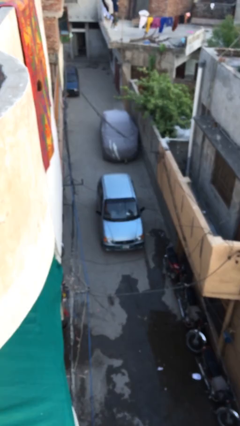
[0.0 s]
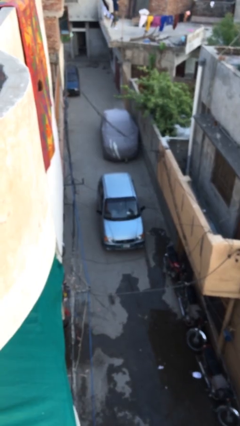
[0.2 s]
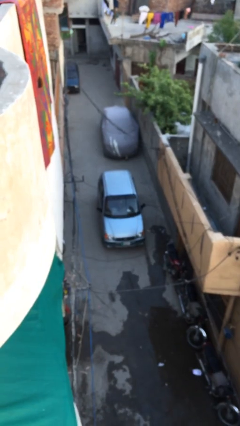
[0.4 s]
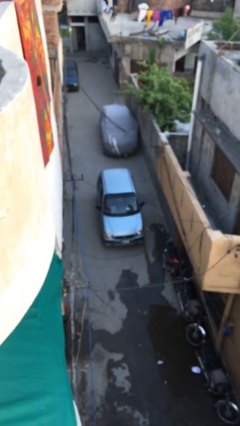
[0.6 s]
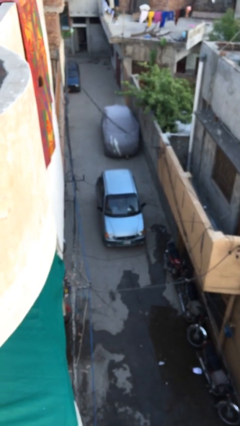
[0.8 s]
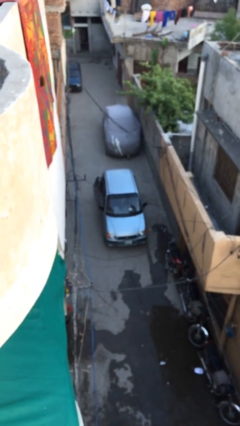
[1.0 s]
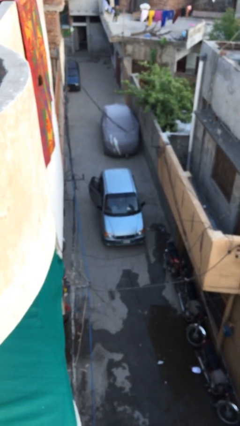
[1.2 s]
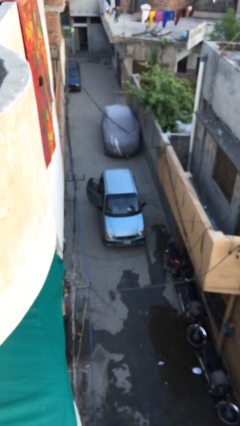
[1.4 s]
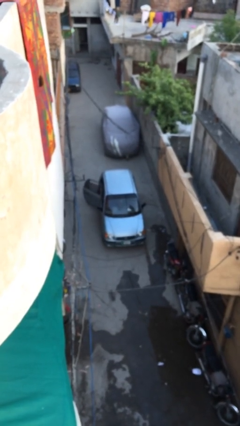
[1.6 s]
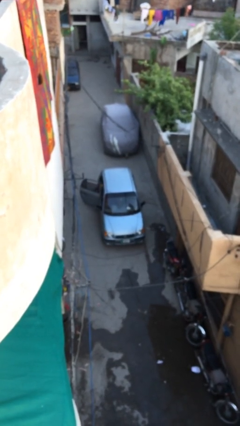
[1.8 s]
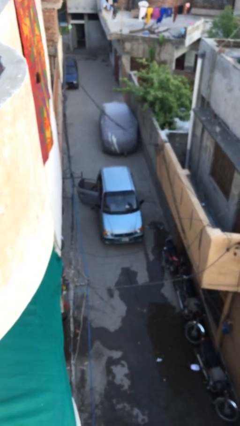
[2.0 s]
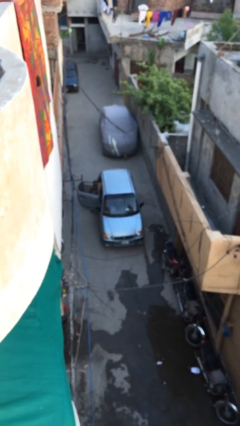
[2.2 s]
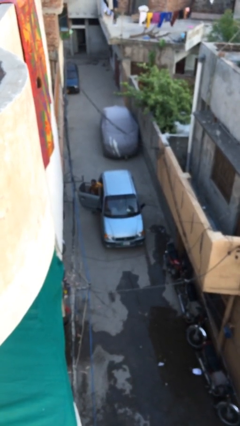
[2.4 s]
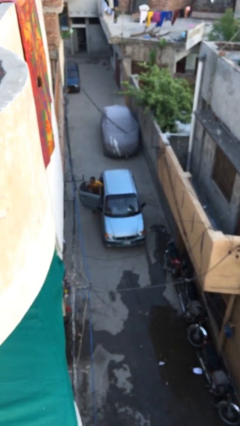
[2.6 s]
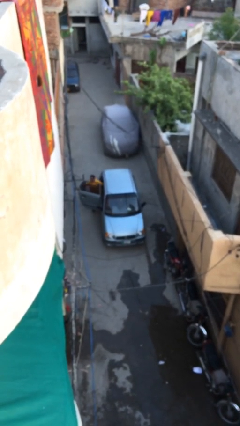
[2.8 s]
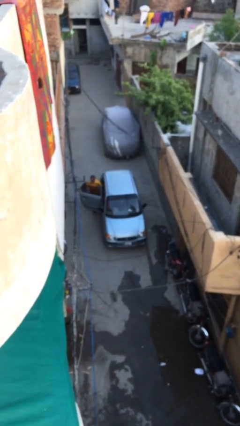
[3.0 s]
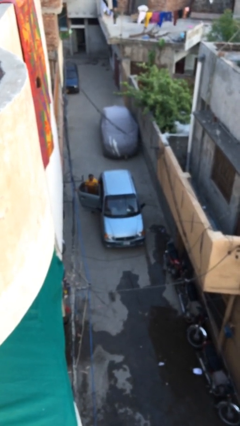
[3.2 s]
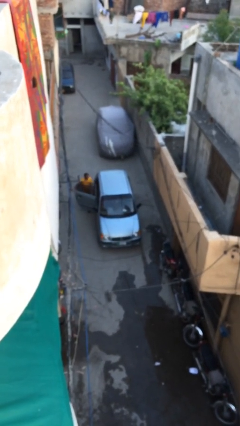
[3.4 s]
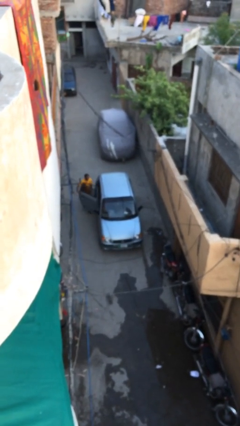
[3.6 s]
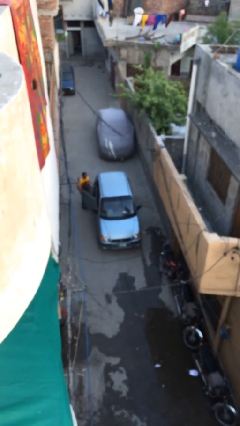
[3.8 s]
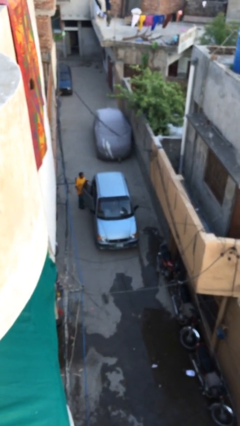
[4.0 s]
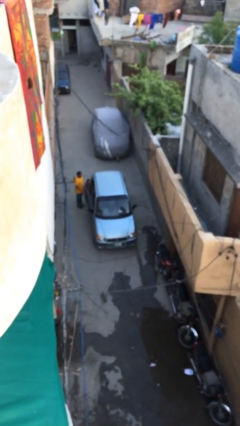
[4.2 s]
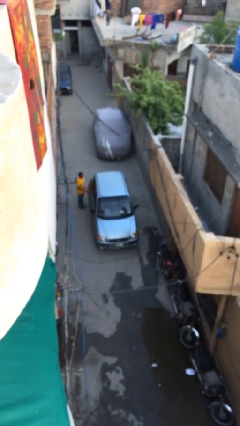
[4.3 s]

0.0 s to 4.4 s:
car drops off person

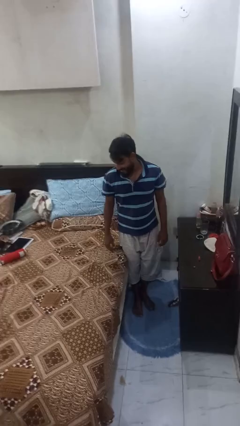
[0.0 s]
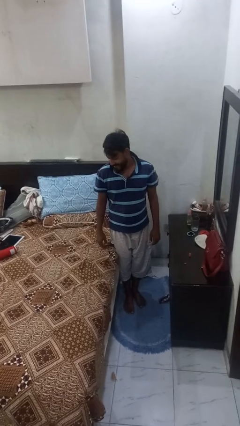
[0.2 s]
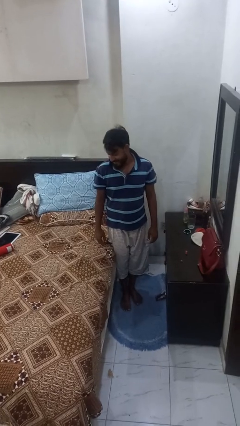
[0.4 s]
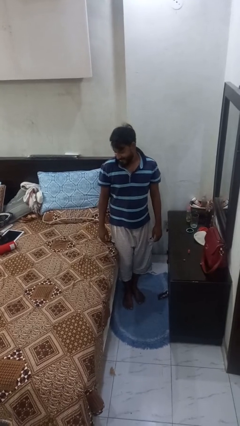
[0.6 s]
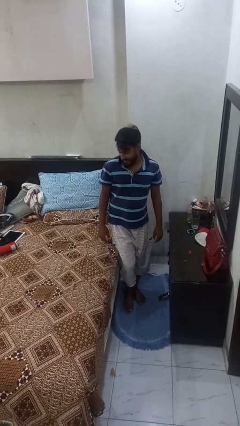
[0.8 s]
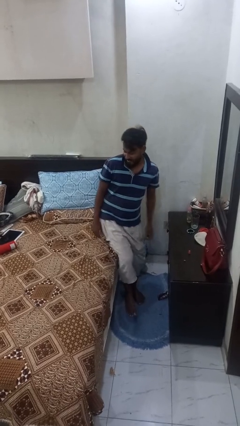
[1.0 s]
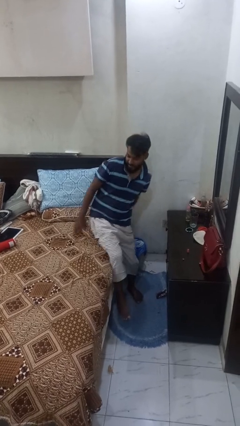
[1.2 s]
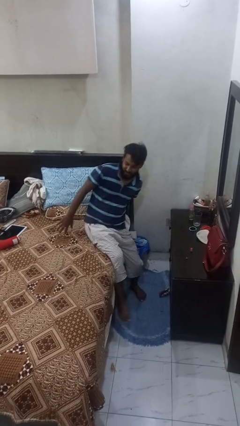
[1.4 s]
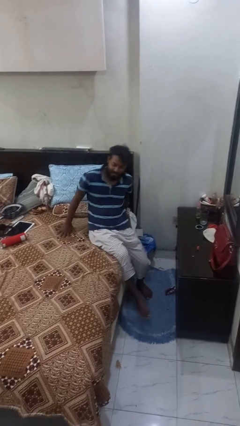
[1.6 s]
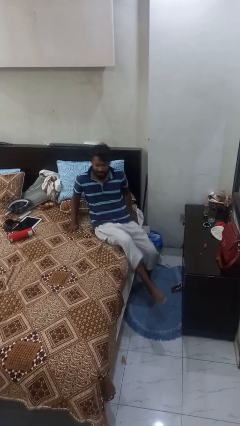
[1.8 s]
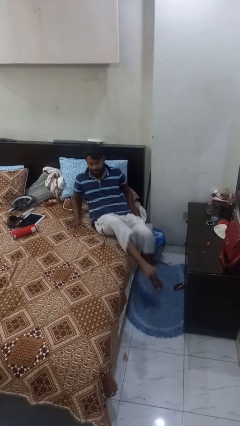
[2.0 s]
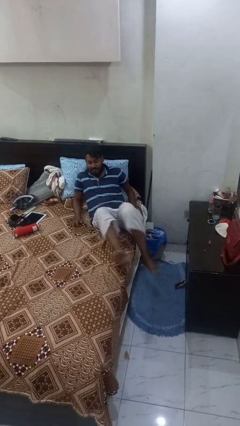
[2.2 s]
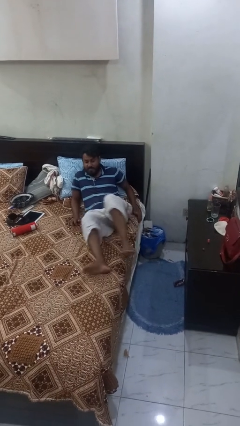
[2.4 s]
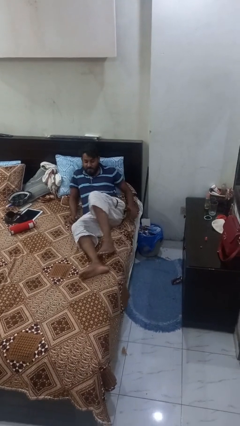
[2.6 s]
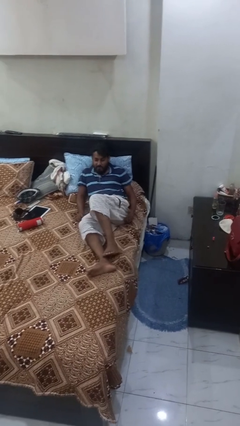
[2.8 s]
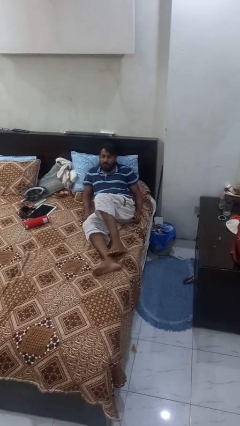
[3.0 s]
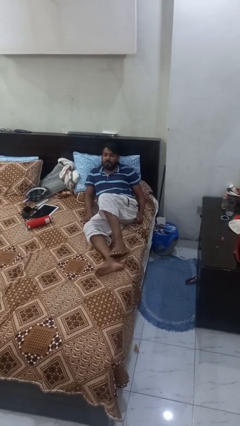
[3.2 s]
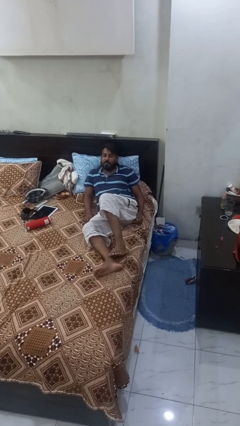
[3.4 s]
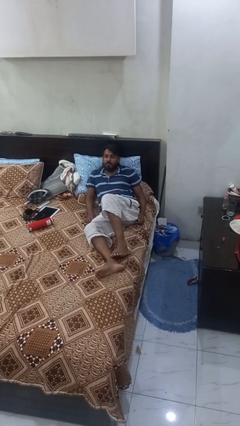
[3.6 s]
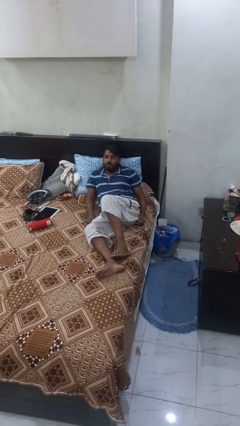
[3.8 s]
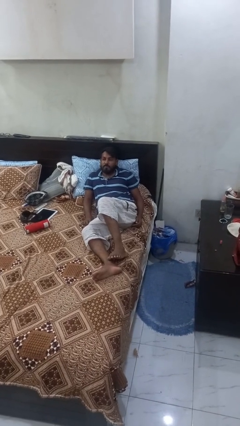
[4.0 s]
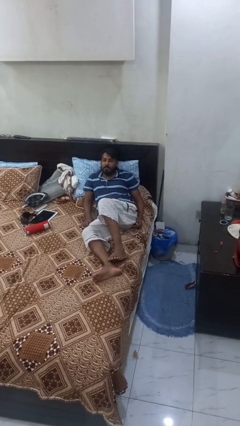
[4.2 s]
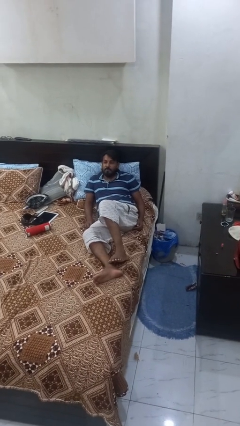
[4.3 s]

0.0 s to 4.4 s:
person lies down on bed

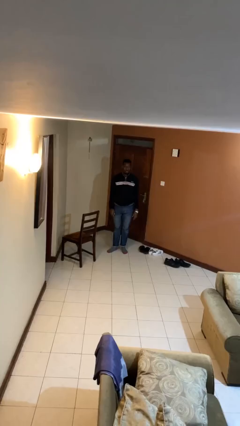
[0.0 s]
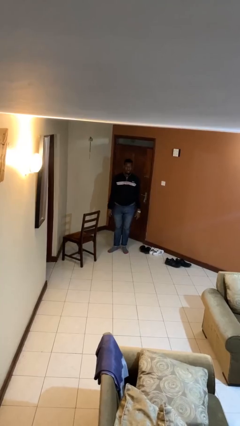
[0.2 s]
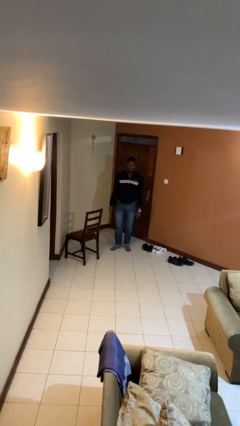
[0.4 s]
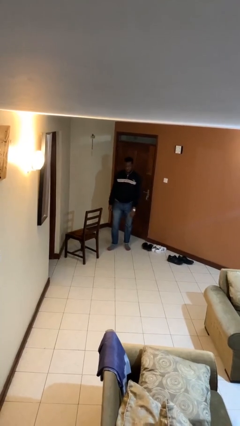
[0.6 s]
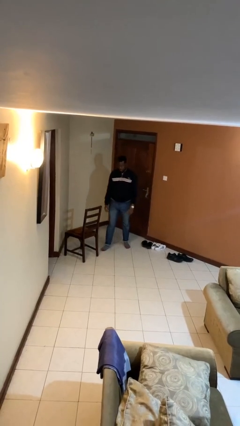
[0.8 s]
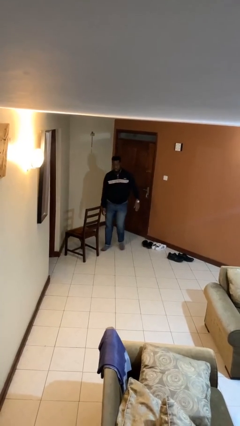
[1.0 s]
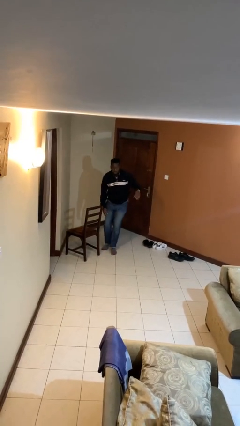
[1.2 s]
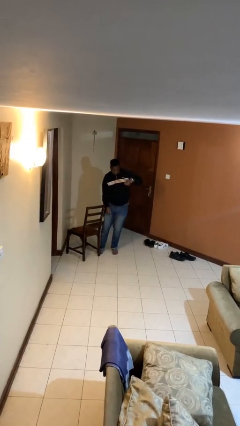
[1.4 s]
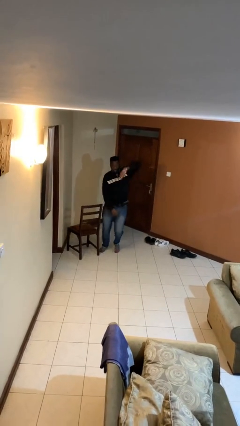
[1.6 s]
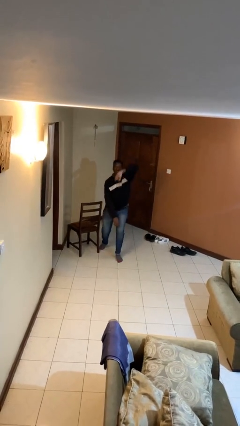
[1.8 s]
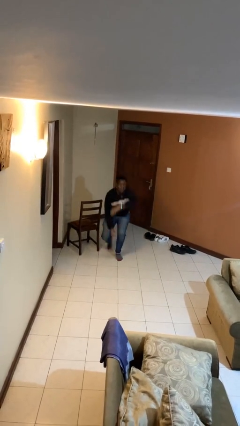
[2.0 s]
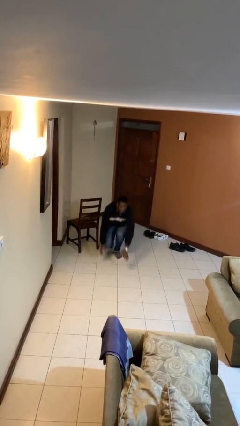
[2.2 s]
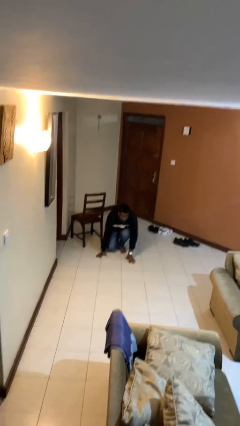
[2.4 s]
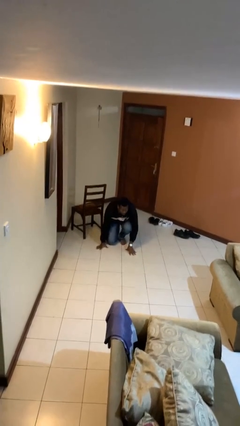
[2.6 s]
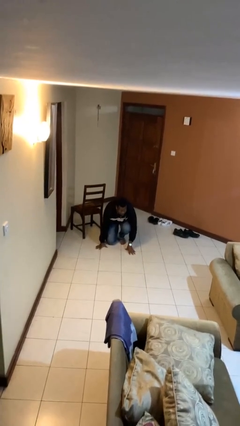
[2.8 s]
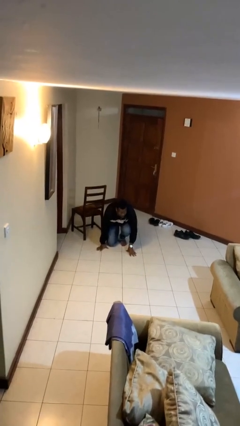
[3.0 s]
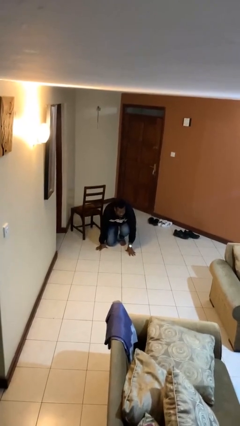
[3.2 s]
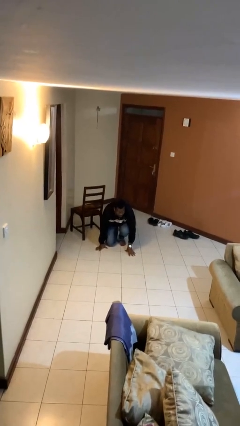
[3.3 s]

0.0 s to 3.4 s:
person trips on object on floor

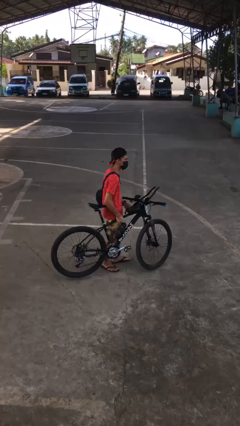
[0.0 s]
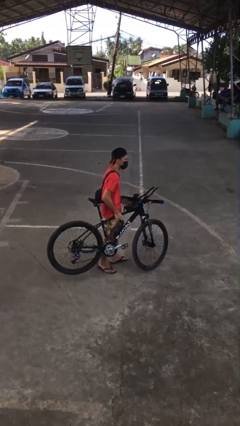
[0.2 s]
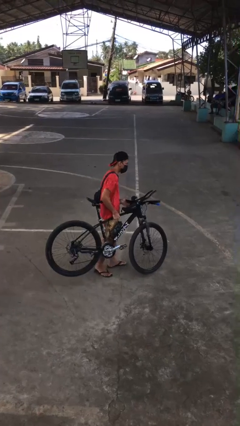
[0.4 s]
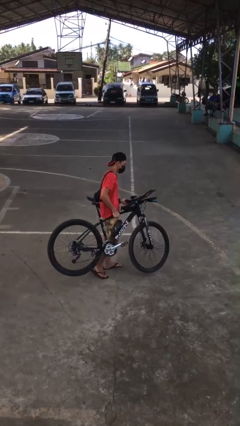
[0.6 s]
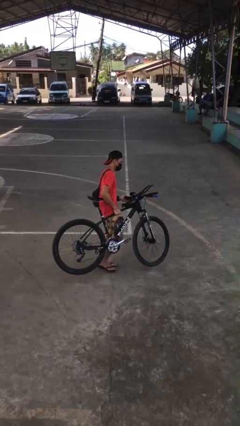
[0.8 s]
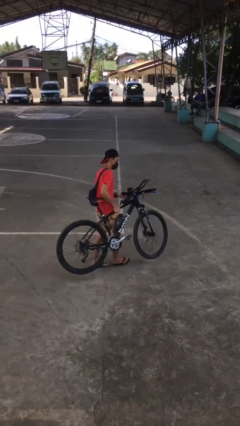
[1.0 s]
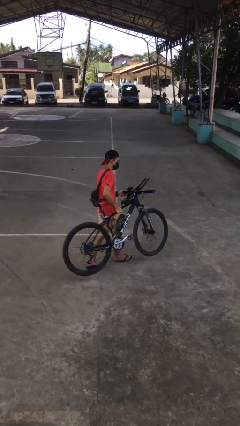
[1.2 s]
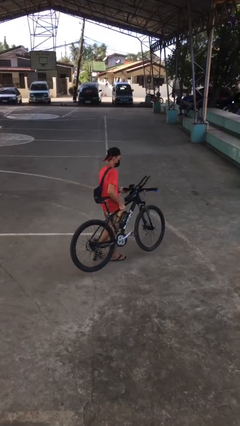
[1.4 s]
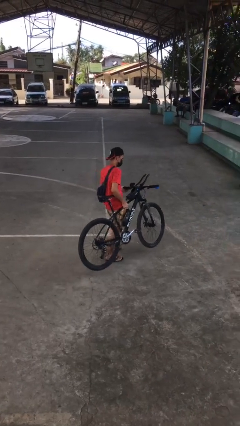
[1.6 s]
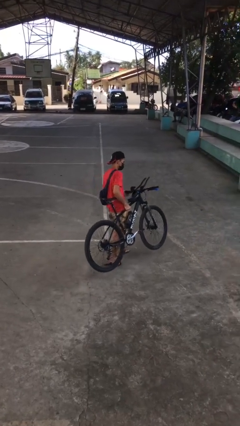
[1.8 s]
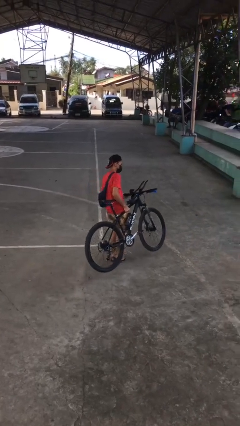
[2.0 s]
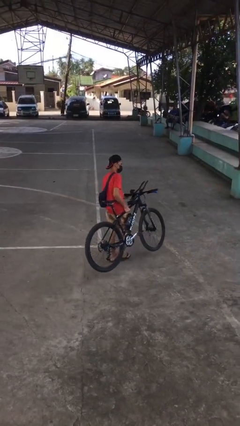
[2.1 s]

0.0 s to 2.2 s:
person carries bicycle

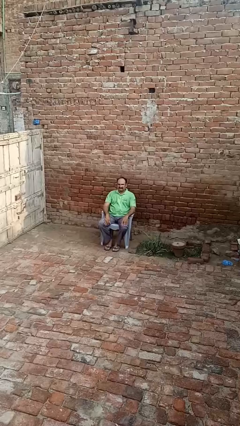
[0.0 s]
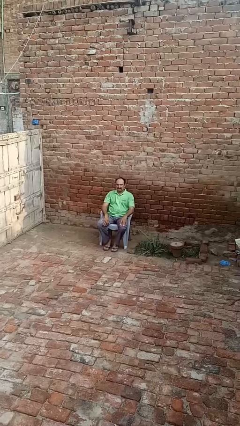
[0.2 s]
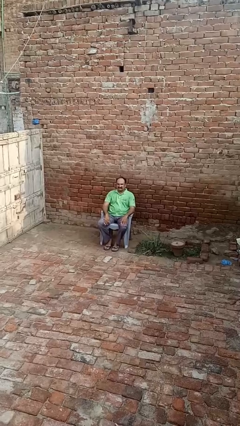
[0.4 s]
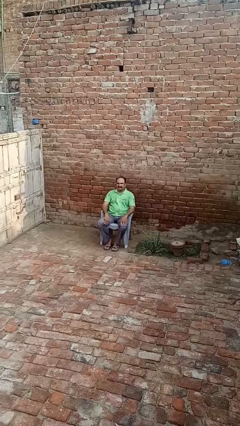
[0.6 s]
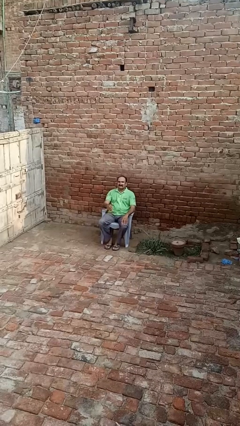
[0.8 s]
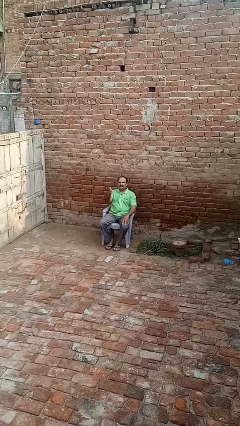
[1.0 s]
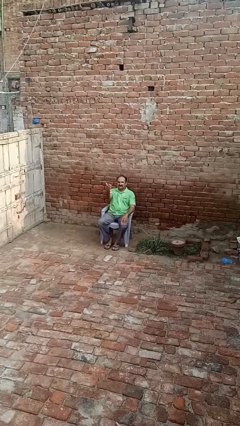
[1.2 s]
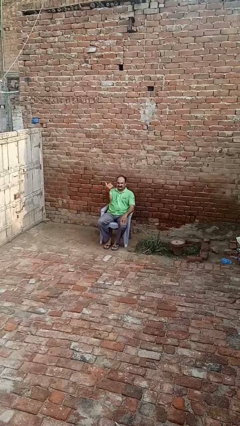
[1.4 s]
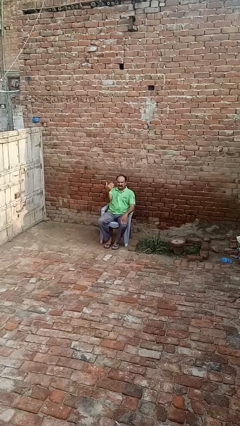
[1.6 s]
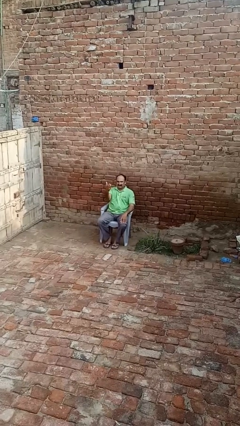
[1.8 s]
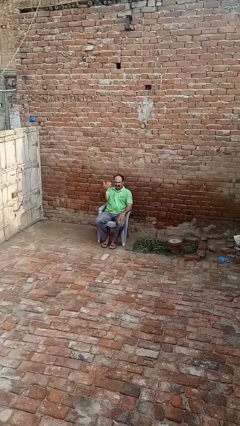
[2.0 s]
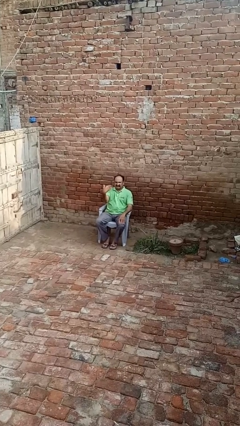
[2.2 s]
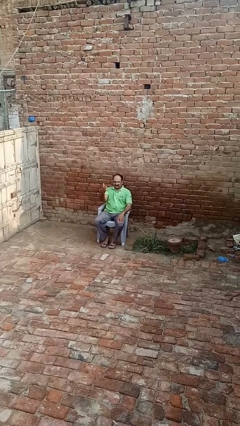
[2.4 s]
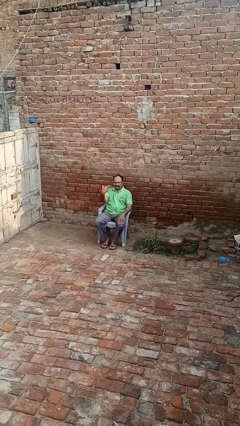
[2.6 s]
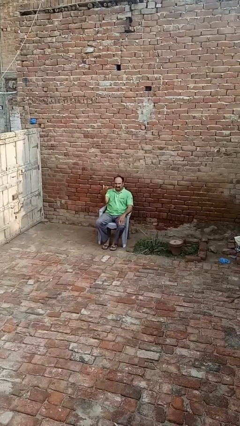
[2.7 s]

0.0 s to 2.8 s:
person gestures come here

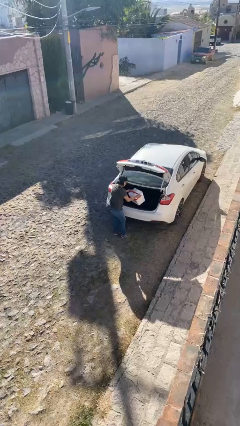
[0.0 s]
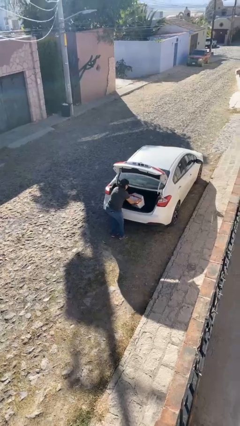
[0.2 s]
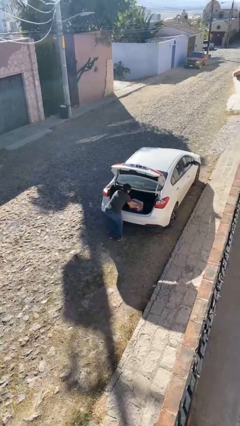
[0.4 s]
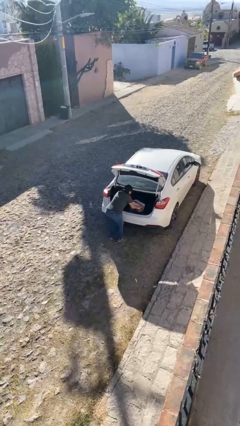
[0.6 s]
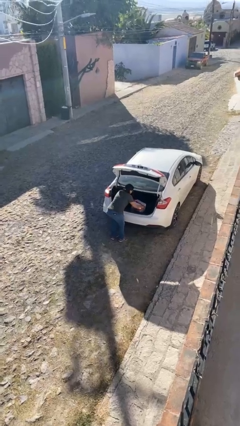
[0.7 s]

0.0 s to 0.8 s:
person loads car
